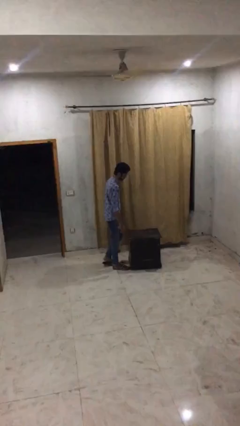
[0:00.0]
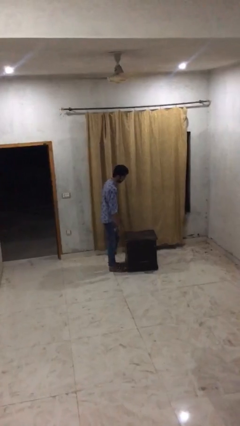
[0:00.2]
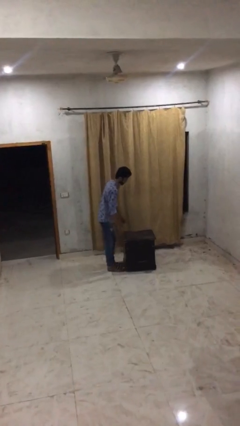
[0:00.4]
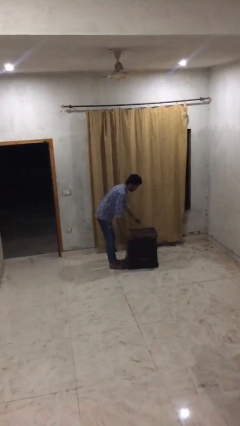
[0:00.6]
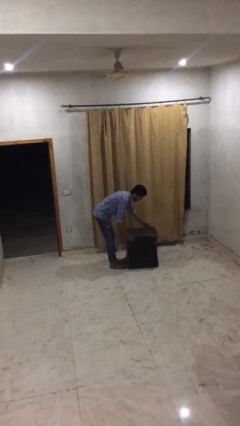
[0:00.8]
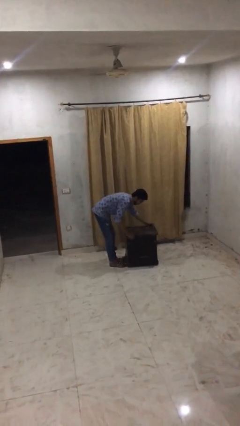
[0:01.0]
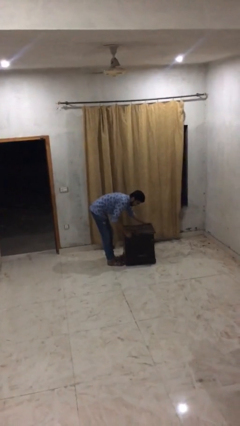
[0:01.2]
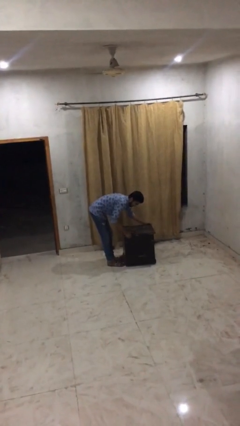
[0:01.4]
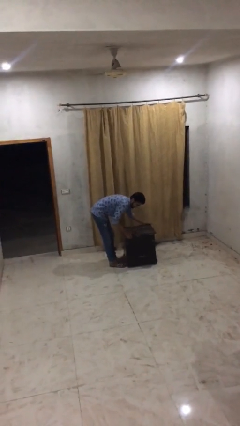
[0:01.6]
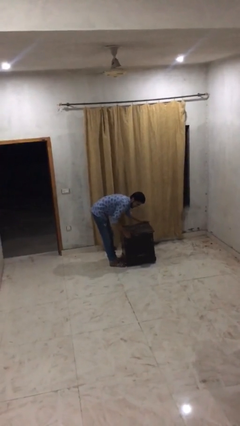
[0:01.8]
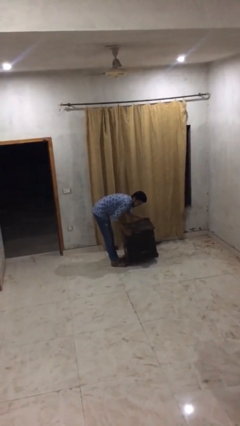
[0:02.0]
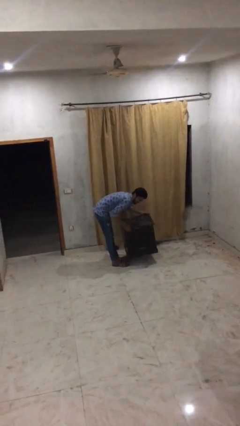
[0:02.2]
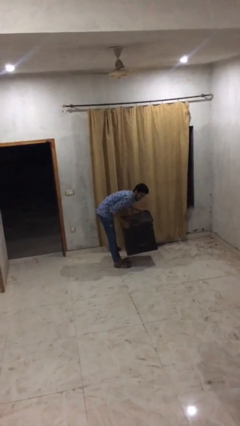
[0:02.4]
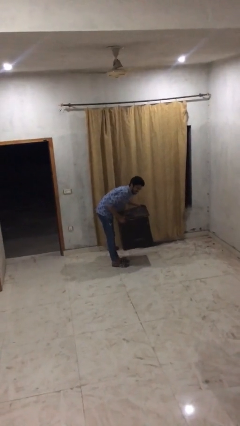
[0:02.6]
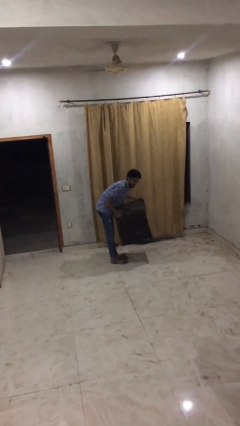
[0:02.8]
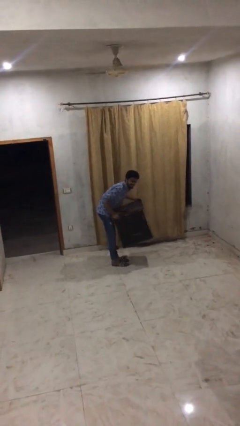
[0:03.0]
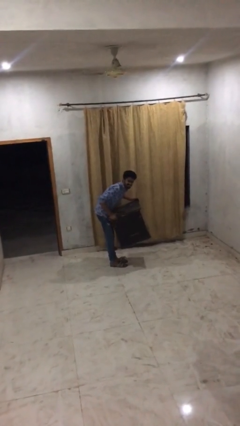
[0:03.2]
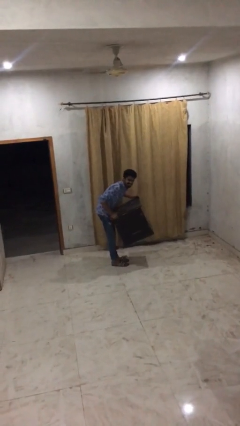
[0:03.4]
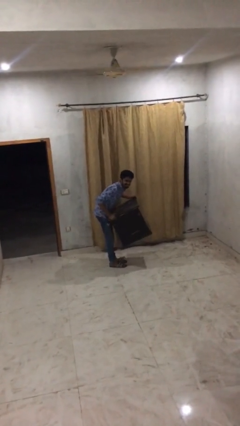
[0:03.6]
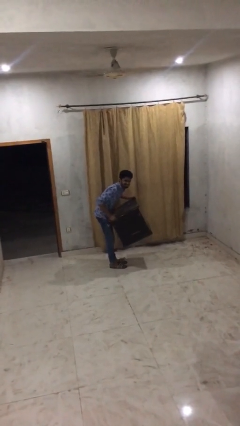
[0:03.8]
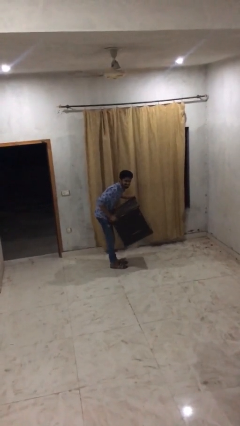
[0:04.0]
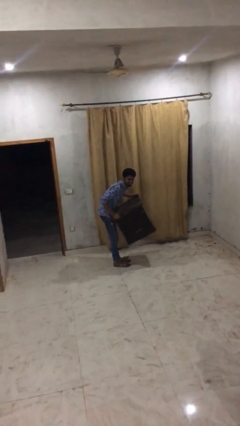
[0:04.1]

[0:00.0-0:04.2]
person picks up object from floor

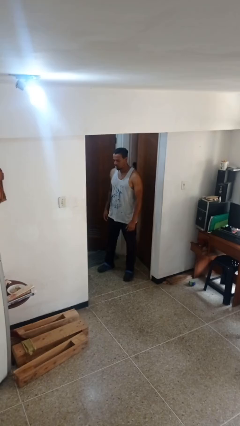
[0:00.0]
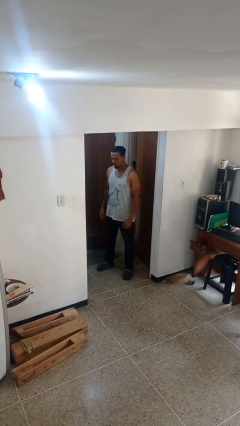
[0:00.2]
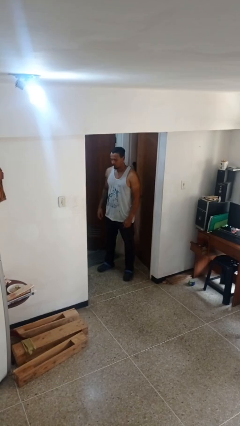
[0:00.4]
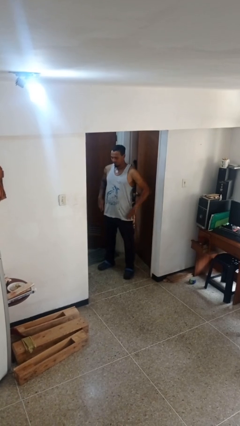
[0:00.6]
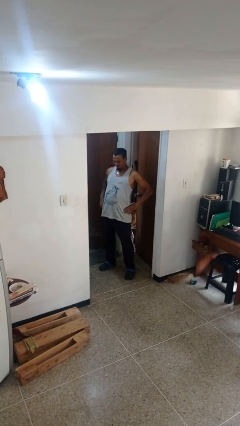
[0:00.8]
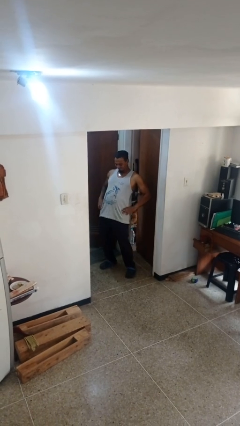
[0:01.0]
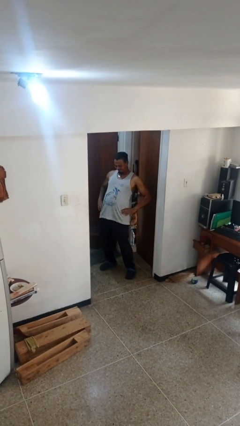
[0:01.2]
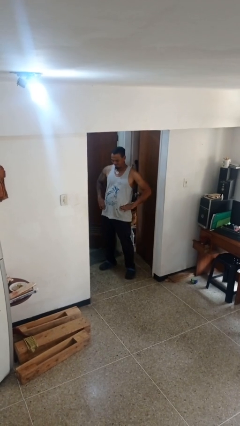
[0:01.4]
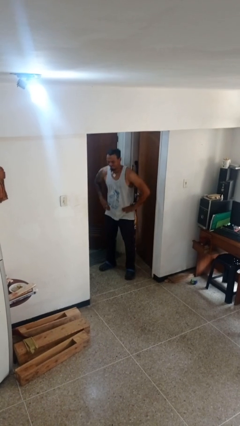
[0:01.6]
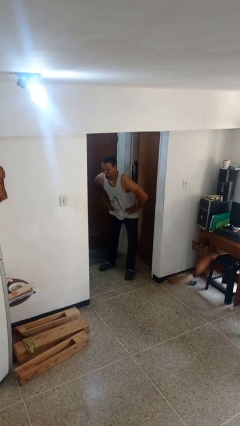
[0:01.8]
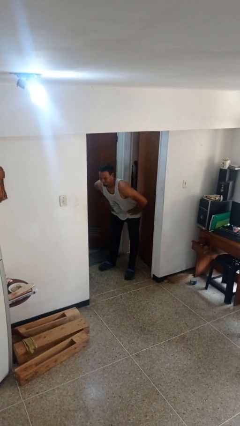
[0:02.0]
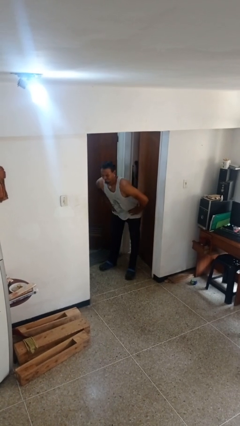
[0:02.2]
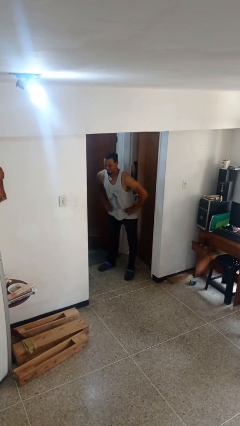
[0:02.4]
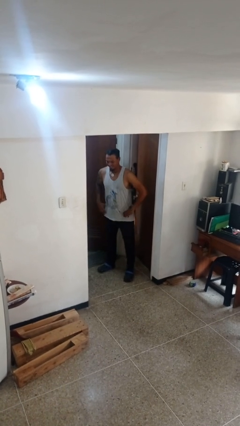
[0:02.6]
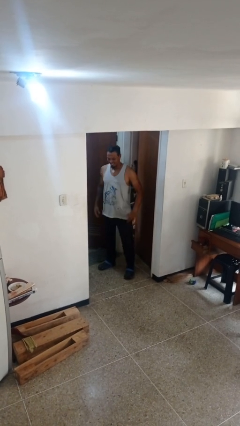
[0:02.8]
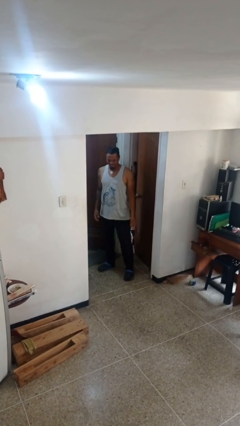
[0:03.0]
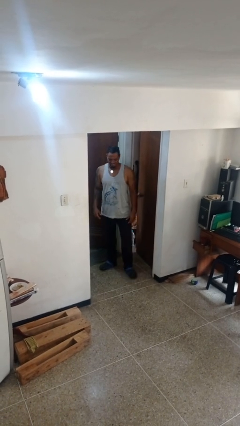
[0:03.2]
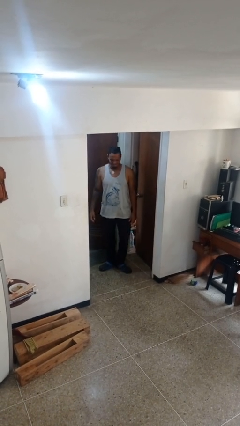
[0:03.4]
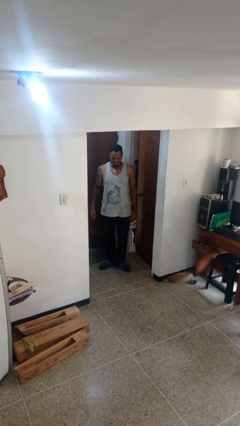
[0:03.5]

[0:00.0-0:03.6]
person wiggles hips

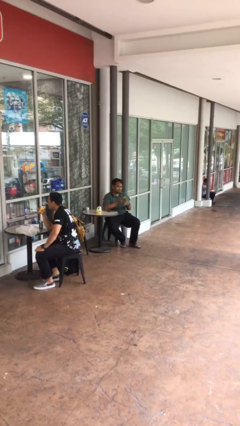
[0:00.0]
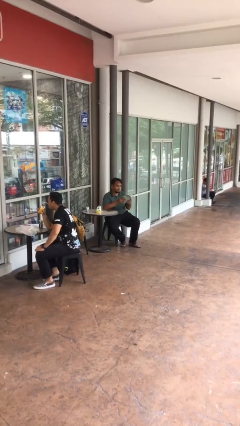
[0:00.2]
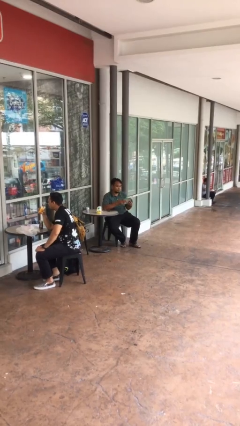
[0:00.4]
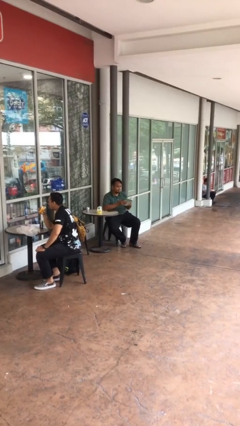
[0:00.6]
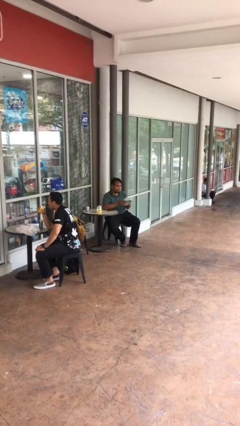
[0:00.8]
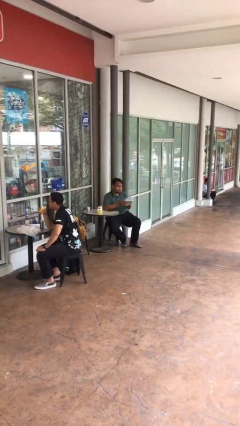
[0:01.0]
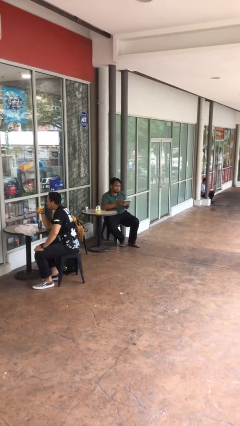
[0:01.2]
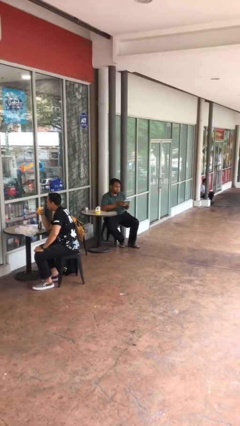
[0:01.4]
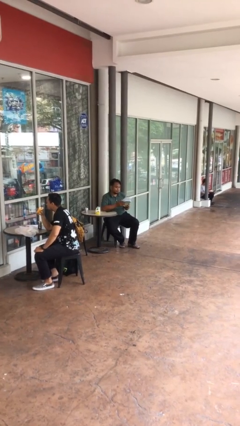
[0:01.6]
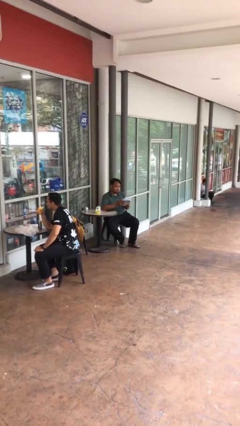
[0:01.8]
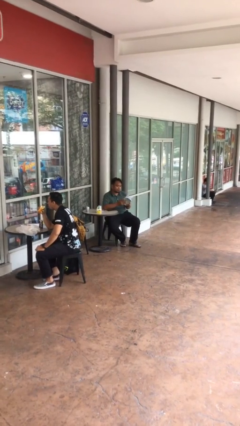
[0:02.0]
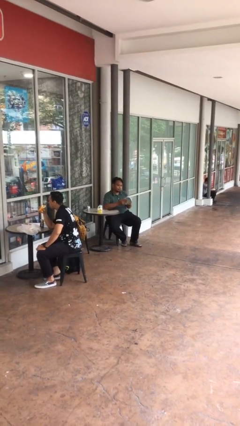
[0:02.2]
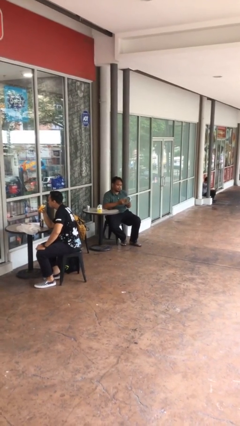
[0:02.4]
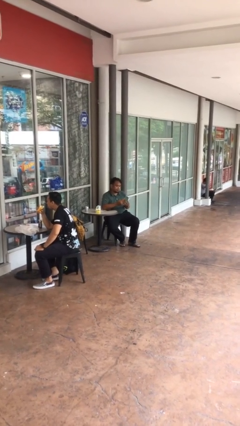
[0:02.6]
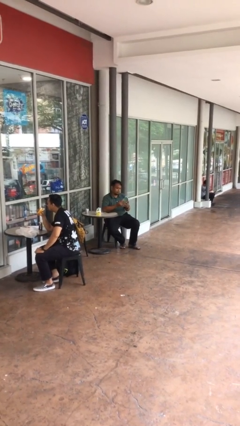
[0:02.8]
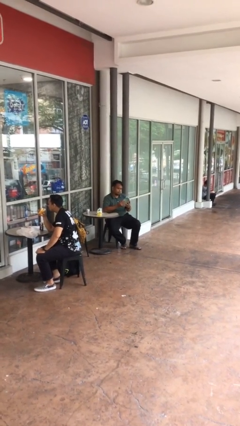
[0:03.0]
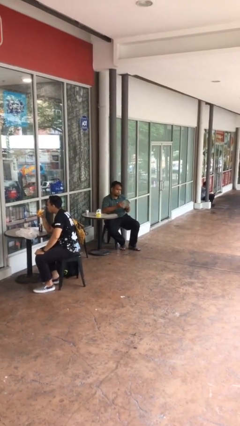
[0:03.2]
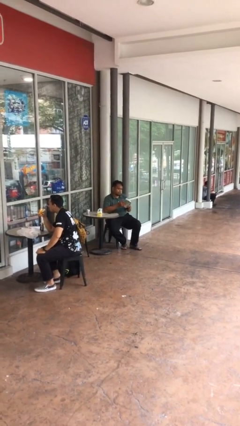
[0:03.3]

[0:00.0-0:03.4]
person reads document

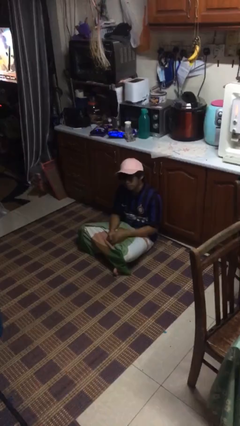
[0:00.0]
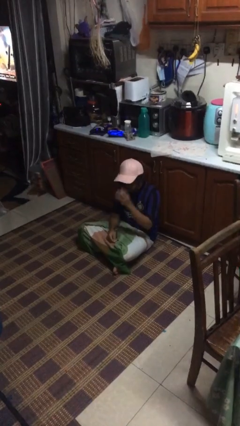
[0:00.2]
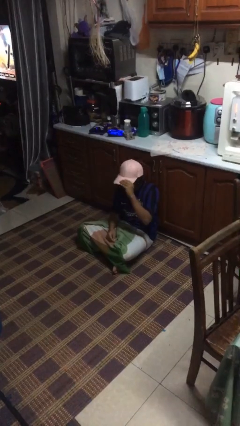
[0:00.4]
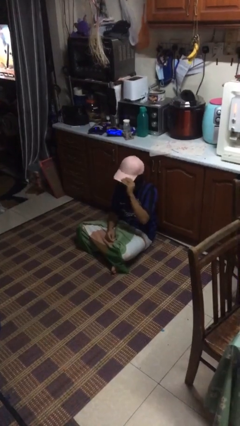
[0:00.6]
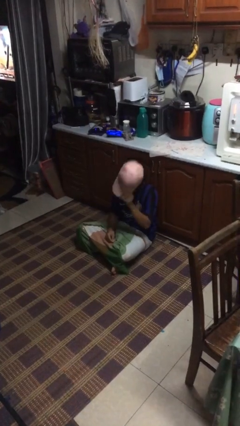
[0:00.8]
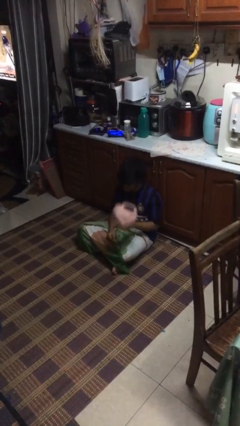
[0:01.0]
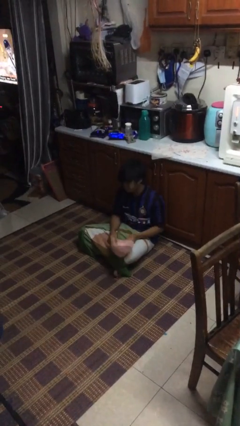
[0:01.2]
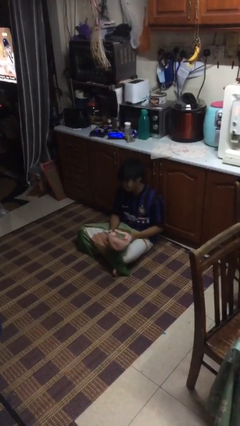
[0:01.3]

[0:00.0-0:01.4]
person takes off hat

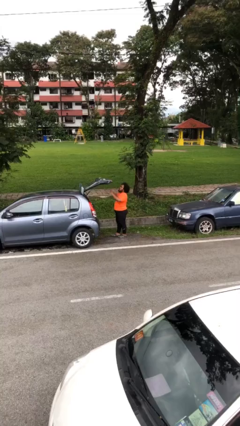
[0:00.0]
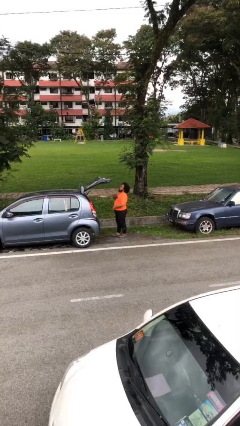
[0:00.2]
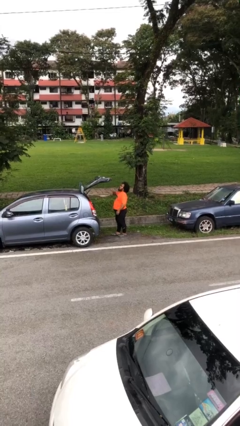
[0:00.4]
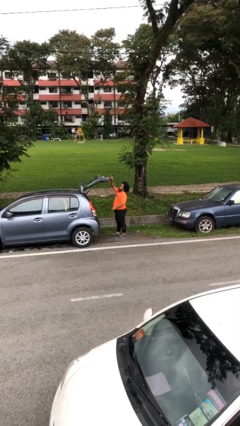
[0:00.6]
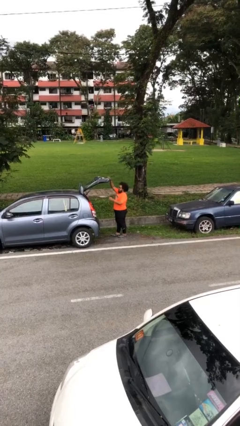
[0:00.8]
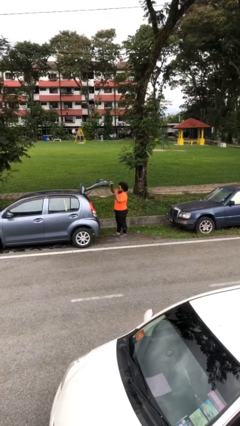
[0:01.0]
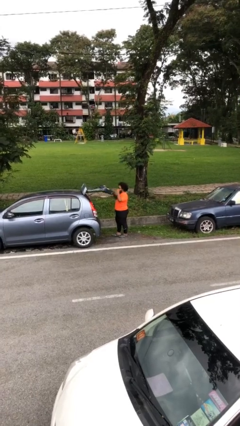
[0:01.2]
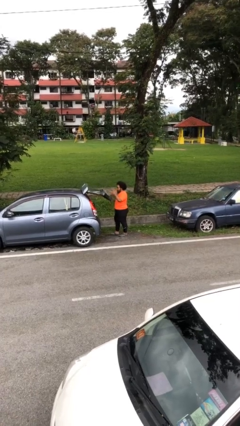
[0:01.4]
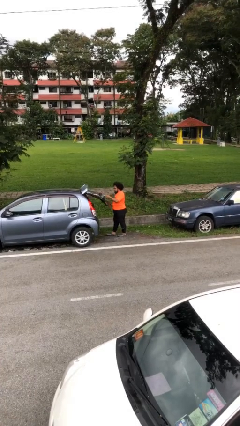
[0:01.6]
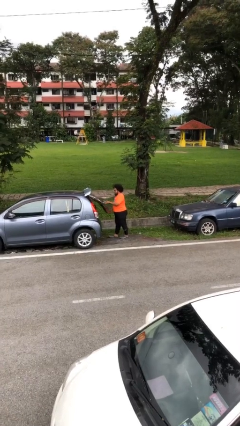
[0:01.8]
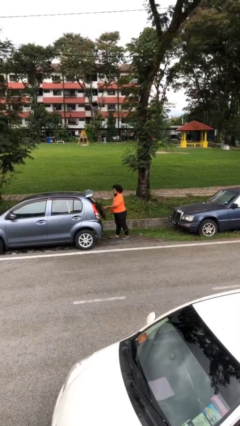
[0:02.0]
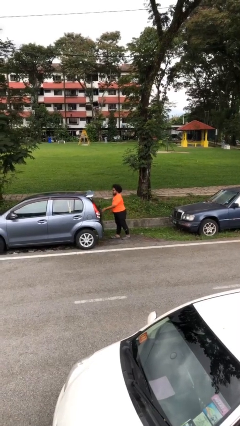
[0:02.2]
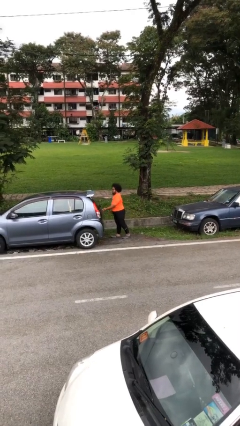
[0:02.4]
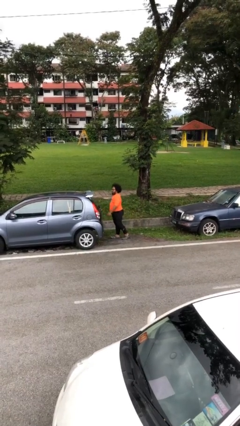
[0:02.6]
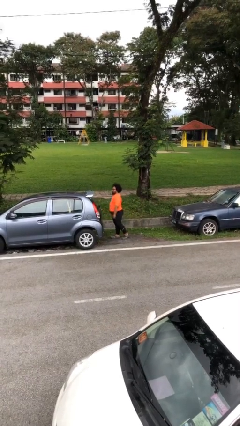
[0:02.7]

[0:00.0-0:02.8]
person closes car trunk

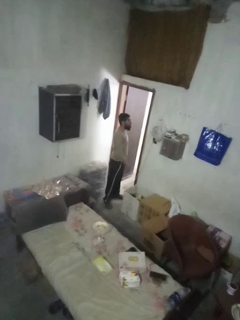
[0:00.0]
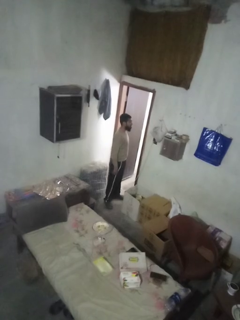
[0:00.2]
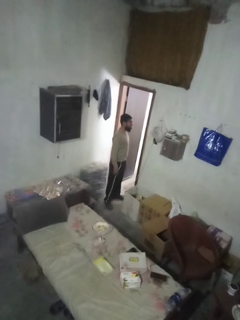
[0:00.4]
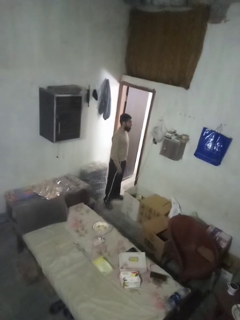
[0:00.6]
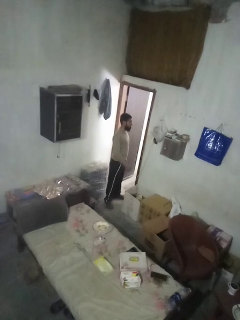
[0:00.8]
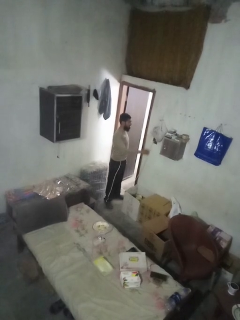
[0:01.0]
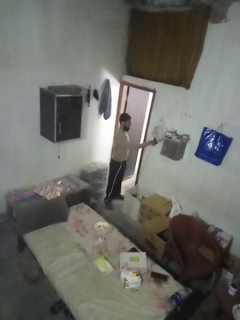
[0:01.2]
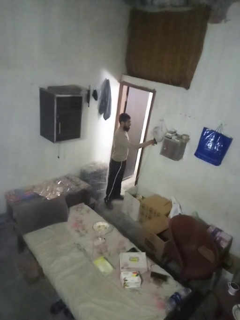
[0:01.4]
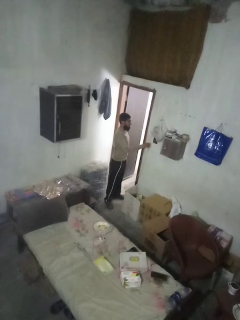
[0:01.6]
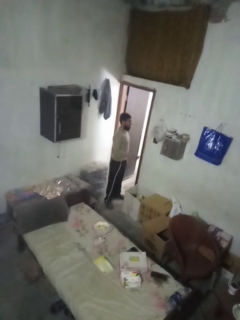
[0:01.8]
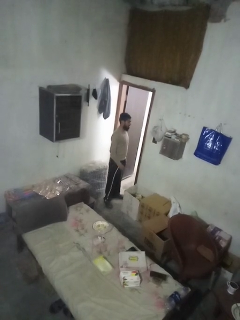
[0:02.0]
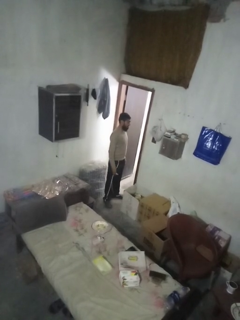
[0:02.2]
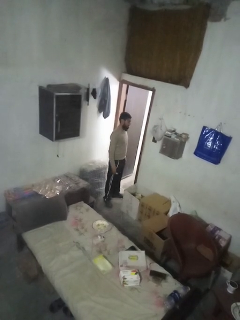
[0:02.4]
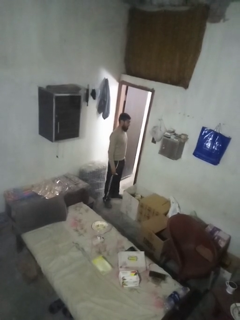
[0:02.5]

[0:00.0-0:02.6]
person unplugs from electrical socket

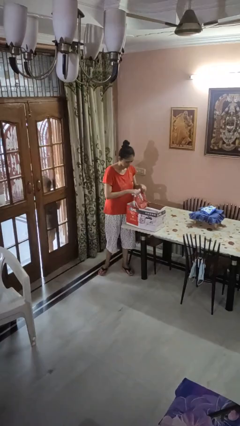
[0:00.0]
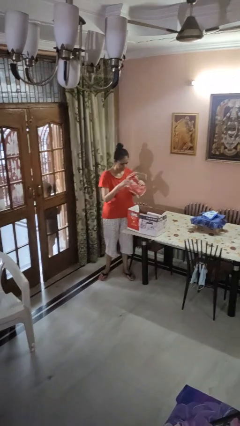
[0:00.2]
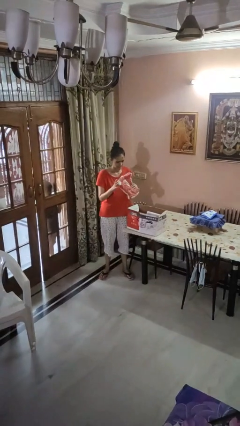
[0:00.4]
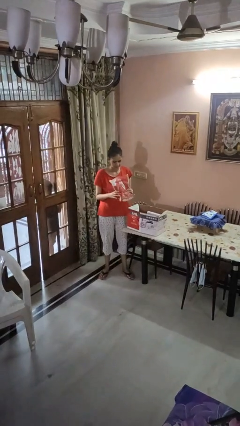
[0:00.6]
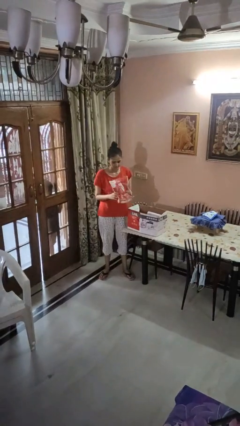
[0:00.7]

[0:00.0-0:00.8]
person takes object from box
